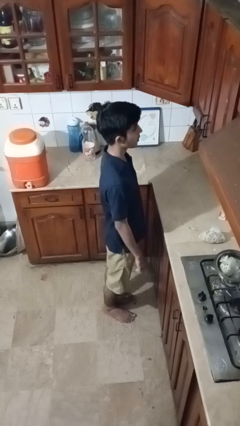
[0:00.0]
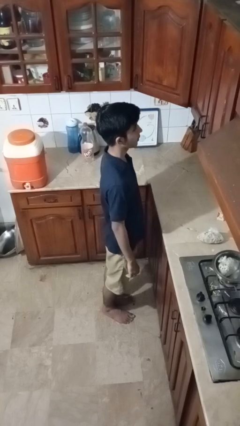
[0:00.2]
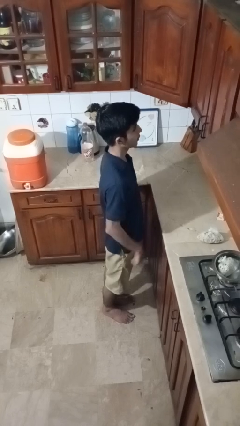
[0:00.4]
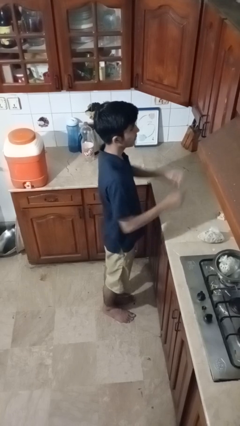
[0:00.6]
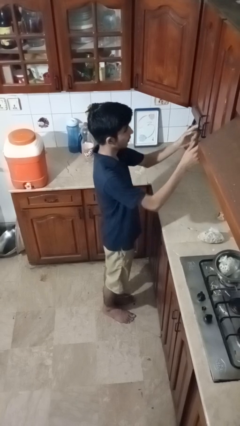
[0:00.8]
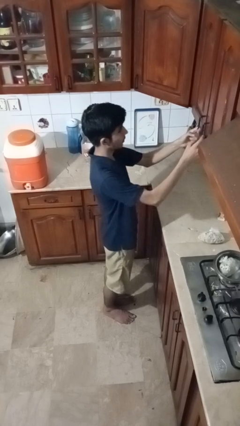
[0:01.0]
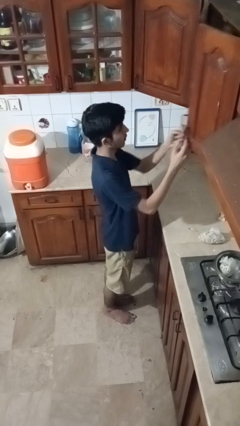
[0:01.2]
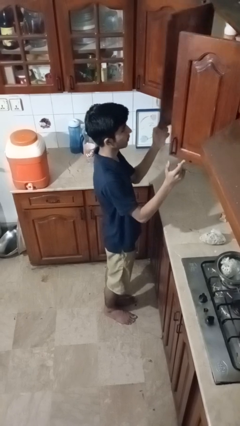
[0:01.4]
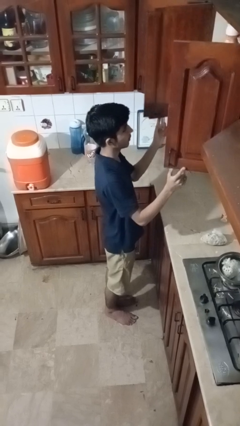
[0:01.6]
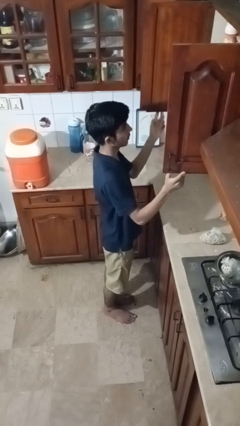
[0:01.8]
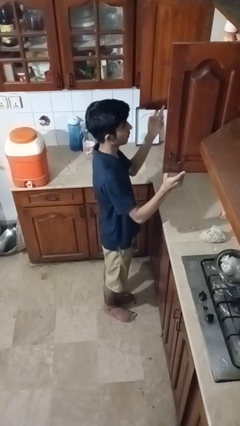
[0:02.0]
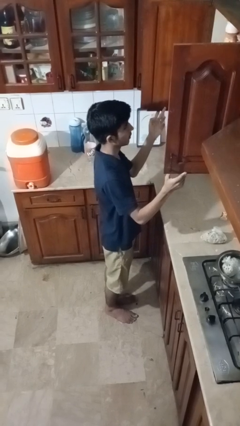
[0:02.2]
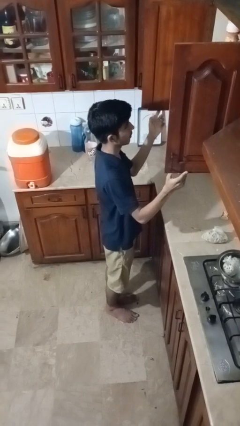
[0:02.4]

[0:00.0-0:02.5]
person opens cabinet

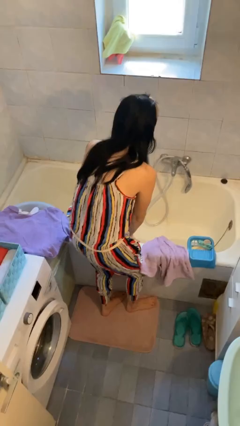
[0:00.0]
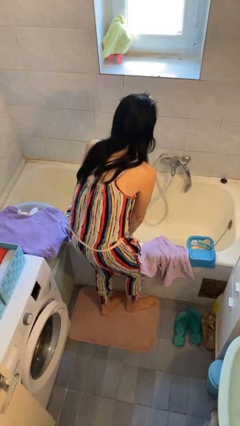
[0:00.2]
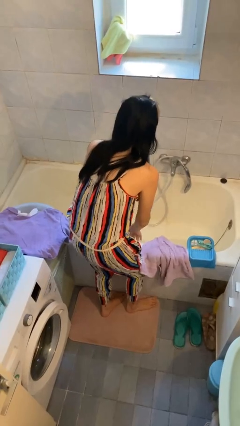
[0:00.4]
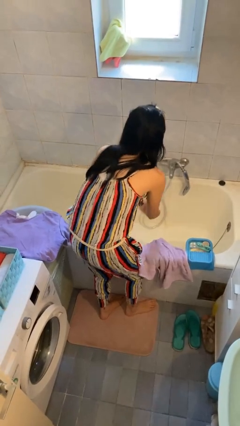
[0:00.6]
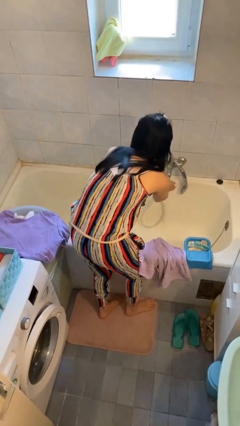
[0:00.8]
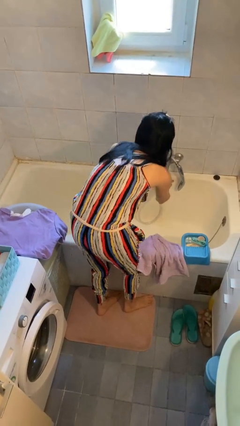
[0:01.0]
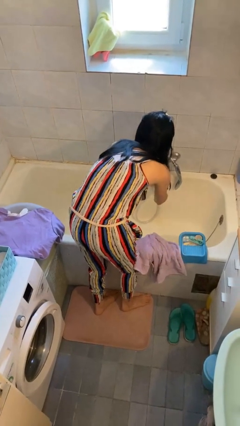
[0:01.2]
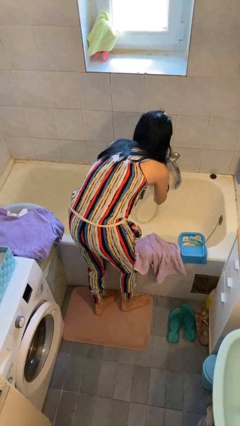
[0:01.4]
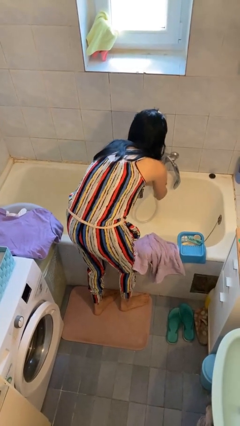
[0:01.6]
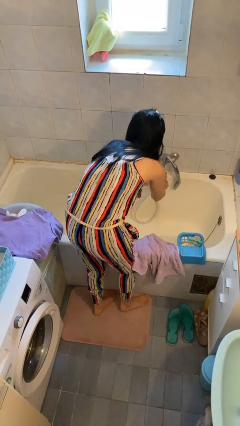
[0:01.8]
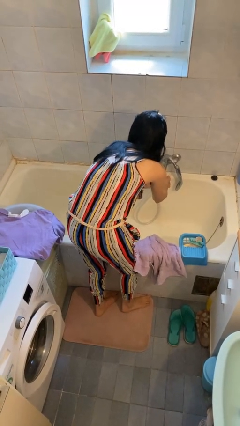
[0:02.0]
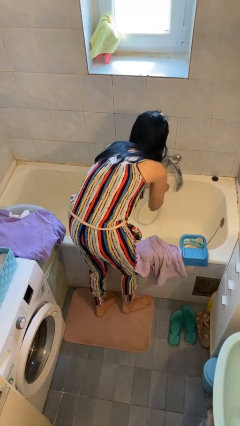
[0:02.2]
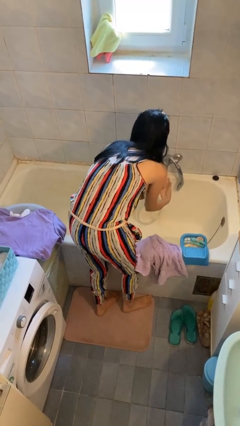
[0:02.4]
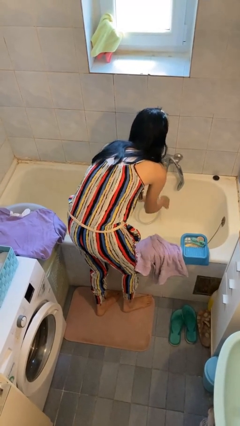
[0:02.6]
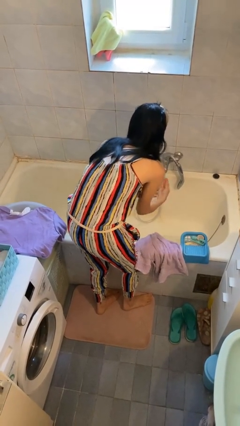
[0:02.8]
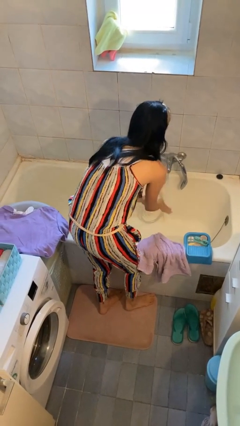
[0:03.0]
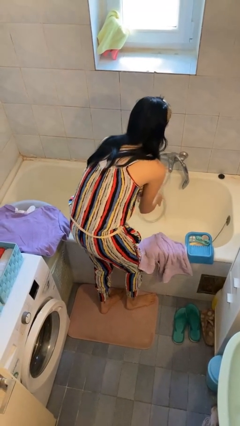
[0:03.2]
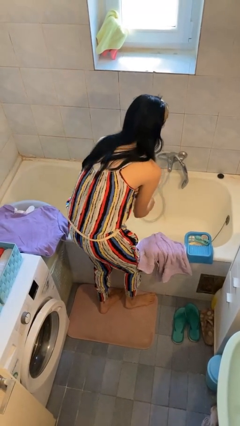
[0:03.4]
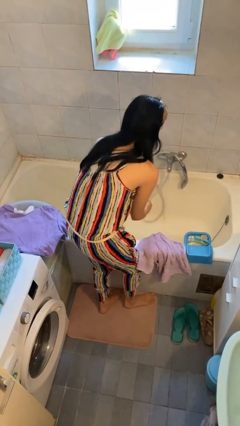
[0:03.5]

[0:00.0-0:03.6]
person washes hands

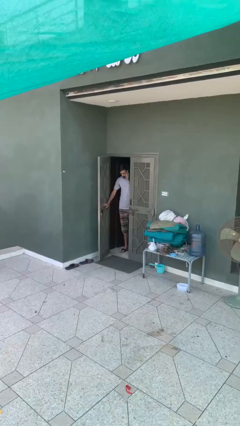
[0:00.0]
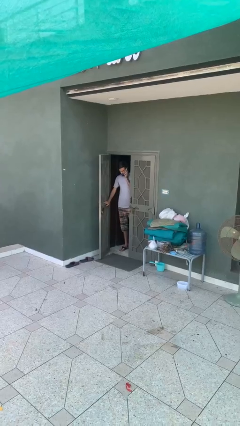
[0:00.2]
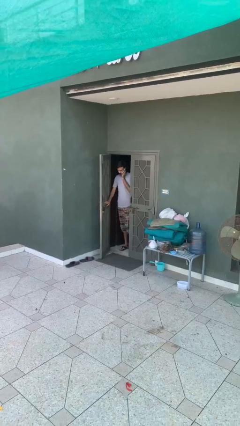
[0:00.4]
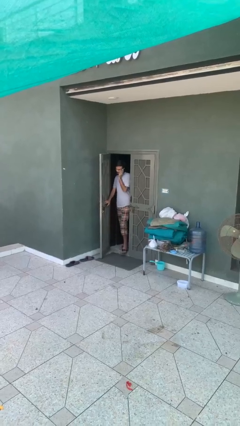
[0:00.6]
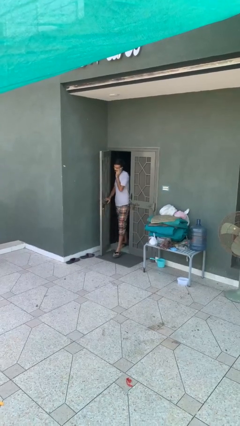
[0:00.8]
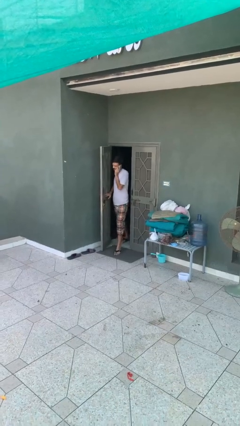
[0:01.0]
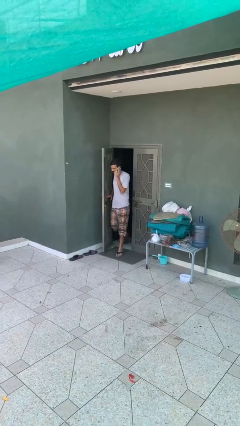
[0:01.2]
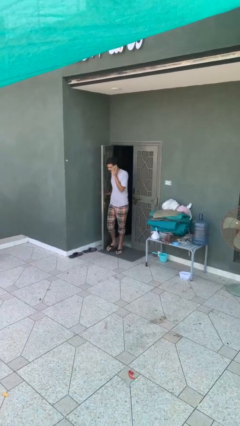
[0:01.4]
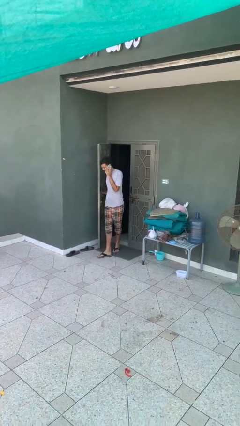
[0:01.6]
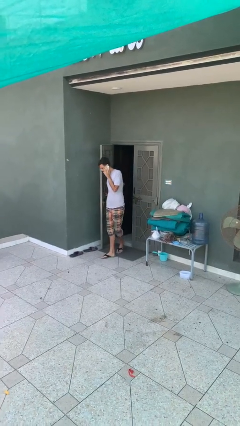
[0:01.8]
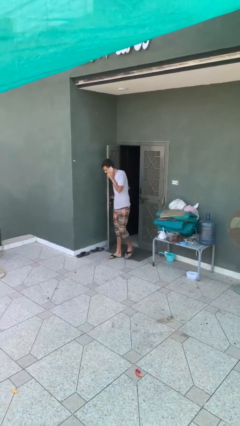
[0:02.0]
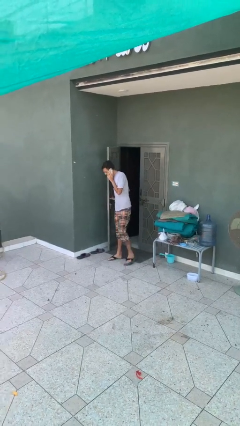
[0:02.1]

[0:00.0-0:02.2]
person enters scene through structure

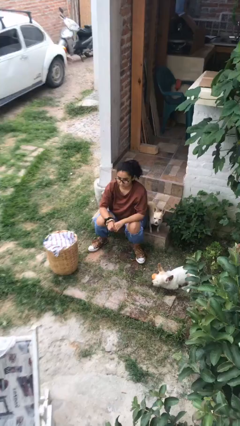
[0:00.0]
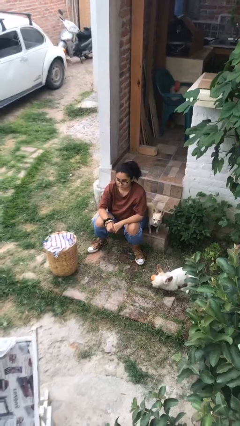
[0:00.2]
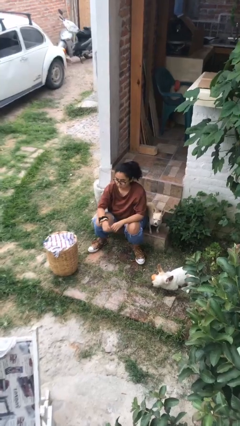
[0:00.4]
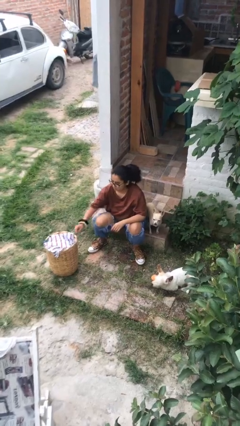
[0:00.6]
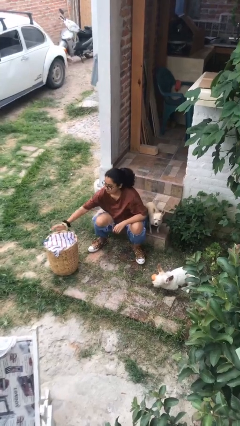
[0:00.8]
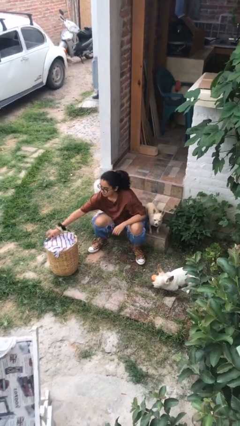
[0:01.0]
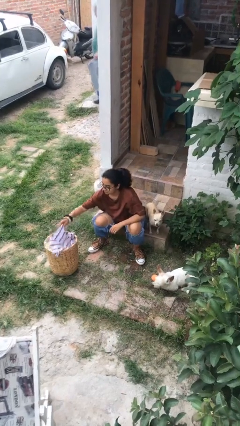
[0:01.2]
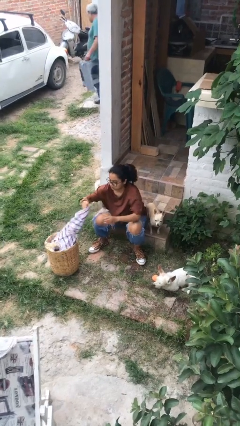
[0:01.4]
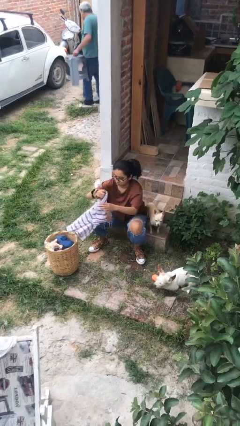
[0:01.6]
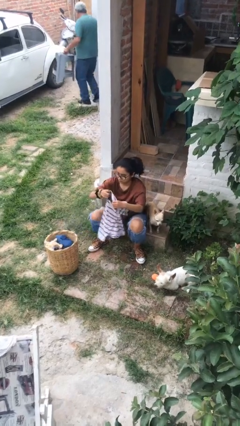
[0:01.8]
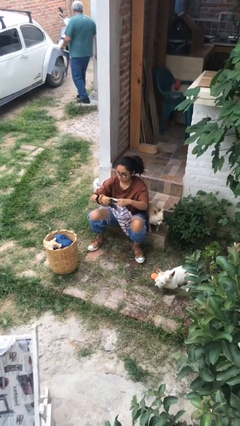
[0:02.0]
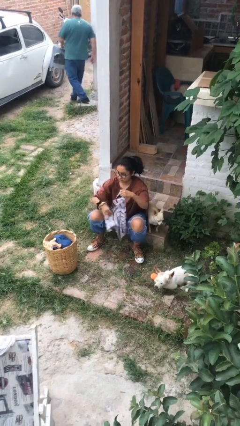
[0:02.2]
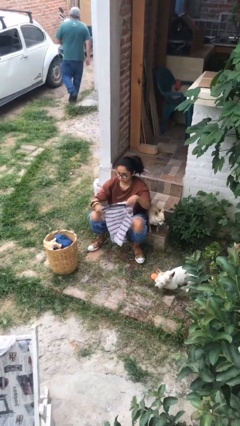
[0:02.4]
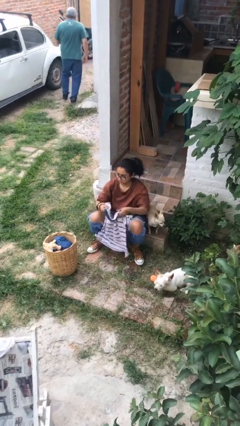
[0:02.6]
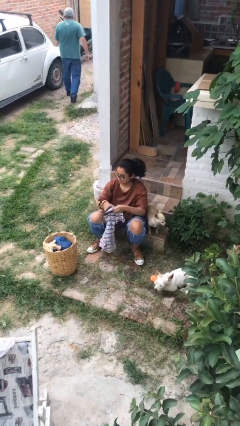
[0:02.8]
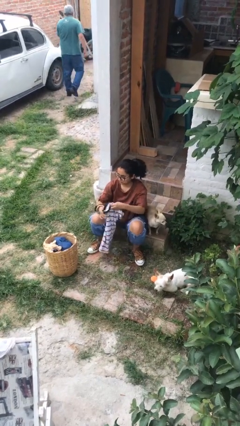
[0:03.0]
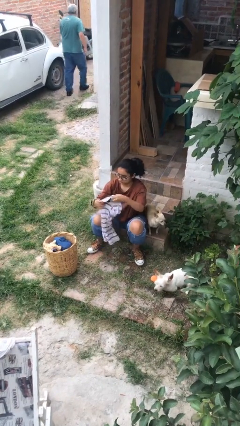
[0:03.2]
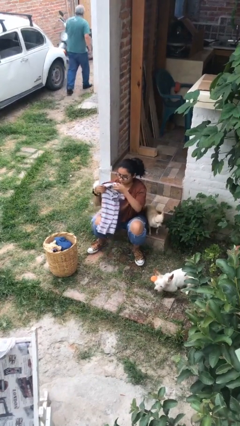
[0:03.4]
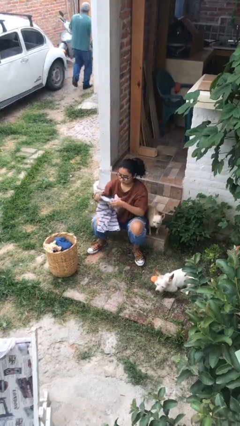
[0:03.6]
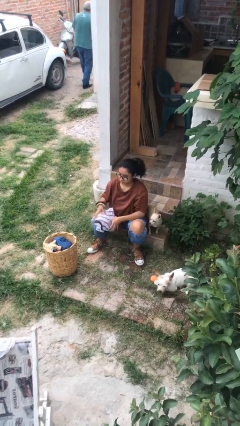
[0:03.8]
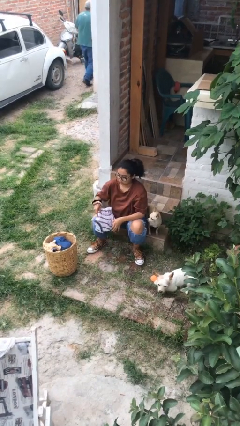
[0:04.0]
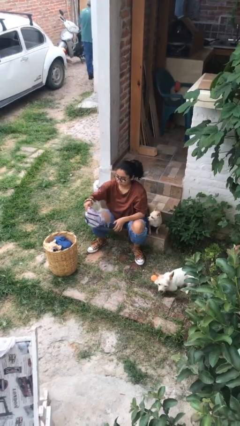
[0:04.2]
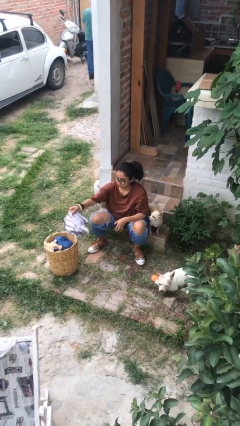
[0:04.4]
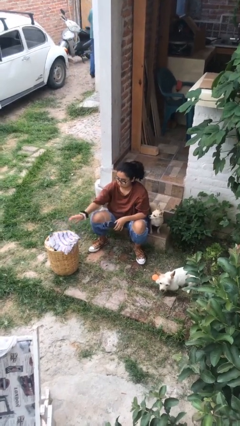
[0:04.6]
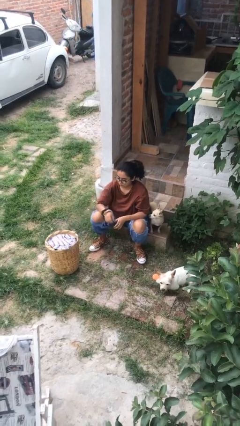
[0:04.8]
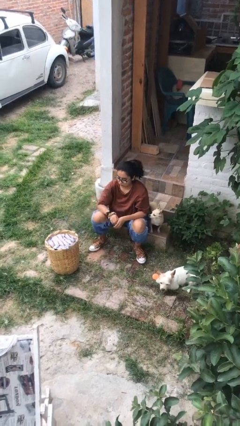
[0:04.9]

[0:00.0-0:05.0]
person folds shirt

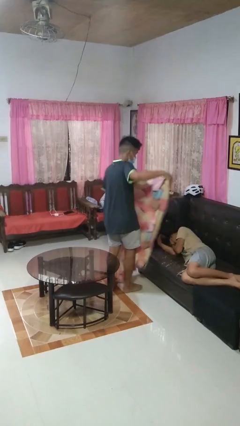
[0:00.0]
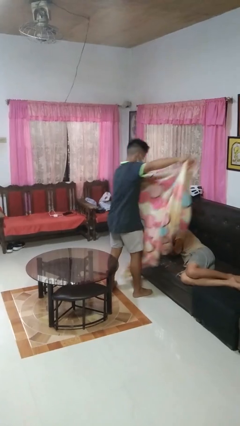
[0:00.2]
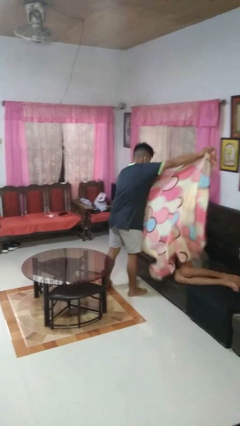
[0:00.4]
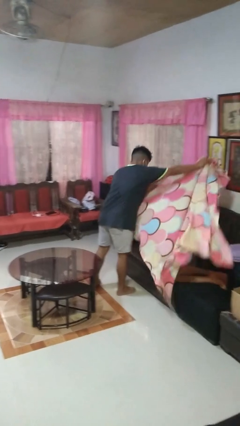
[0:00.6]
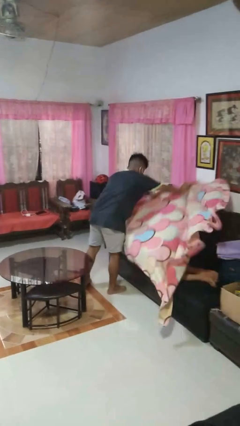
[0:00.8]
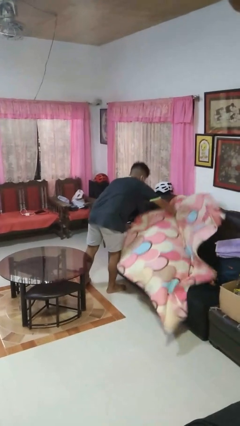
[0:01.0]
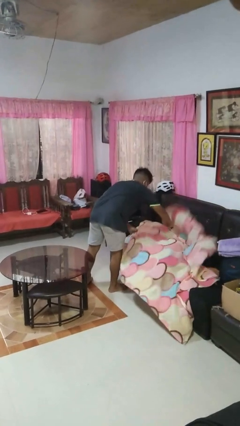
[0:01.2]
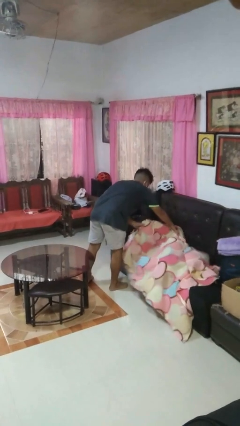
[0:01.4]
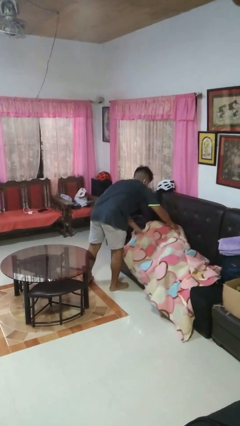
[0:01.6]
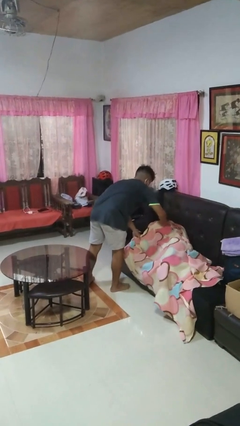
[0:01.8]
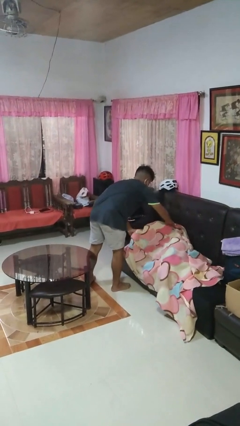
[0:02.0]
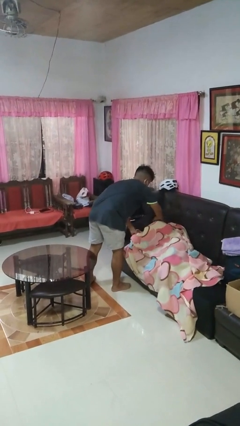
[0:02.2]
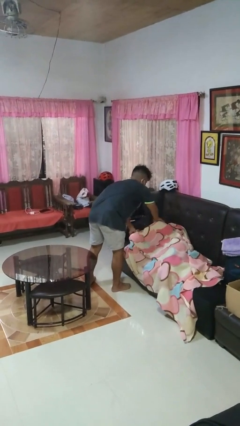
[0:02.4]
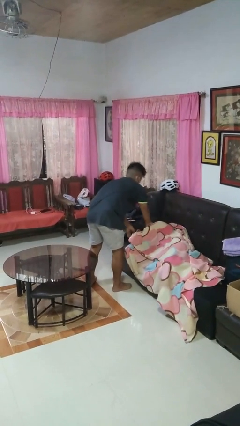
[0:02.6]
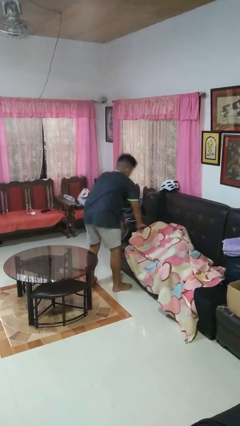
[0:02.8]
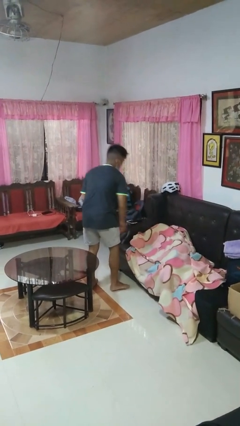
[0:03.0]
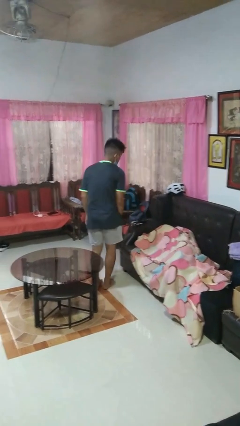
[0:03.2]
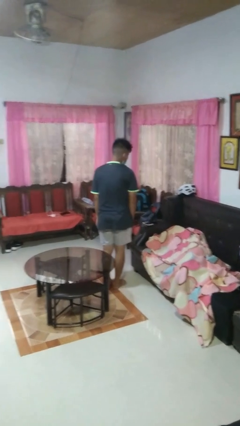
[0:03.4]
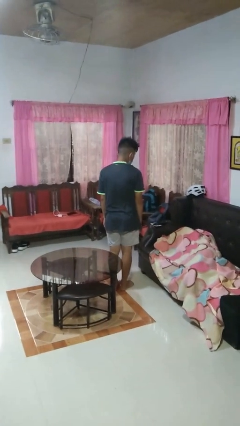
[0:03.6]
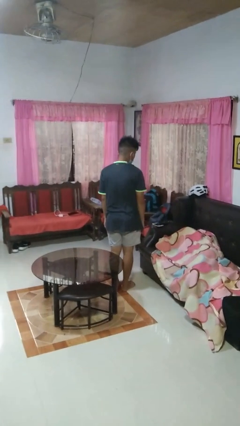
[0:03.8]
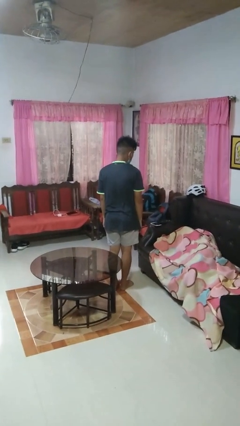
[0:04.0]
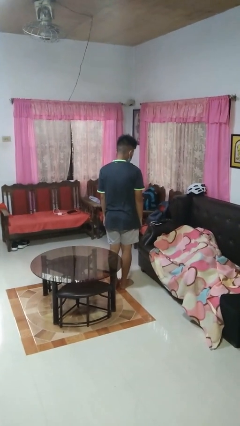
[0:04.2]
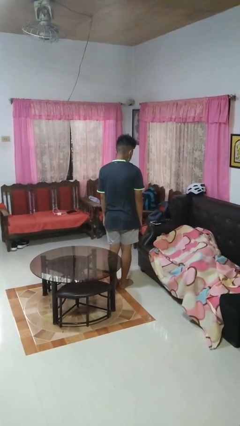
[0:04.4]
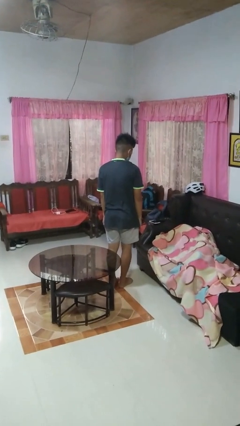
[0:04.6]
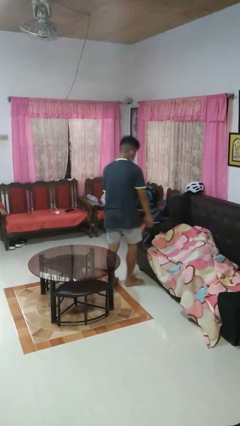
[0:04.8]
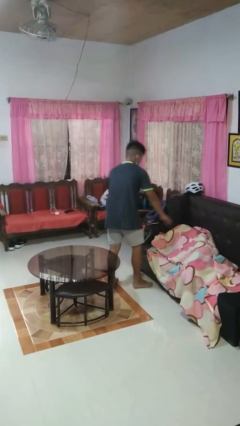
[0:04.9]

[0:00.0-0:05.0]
person covers friend with blanket
